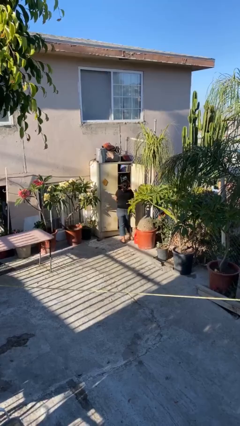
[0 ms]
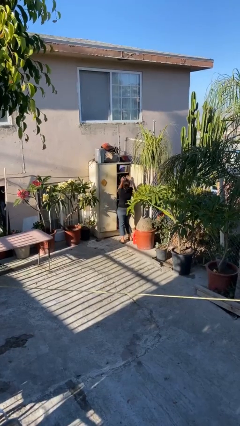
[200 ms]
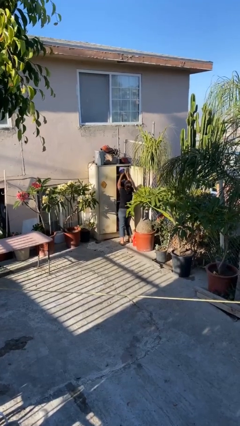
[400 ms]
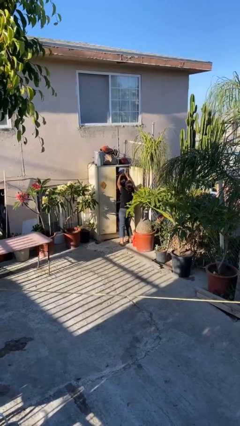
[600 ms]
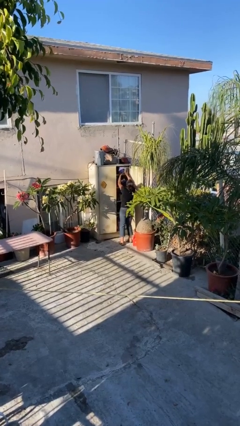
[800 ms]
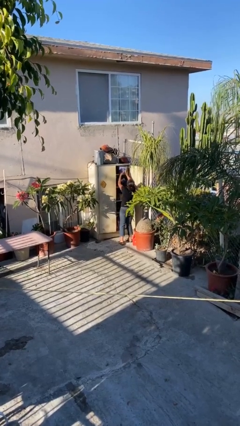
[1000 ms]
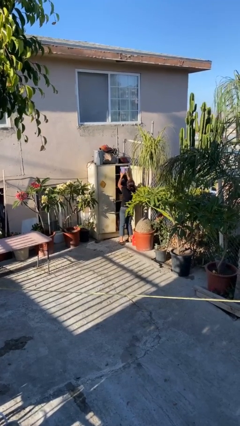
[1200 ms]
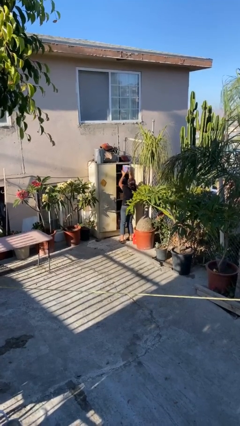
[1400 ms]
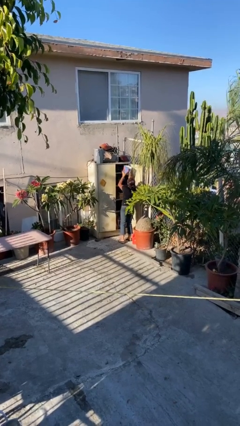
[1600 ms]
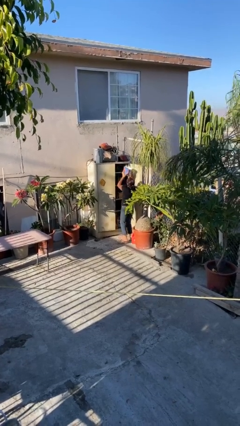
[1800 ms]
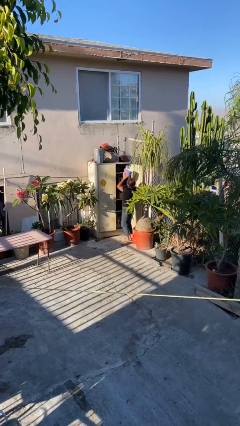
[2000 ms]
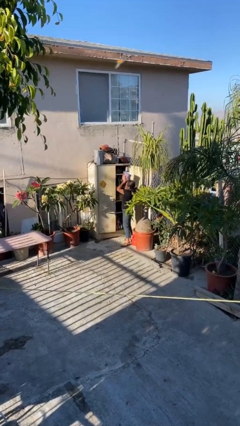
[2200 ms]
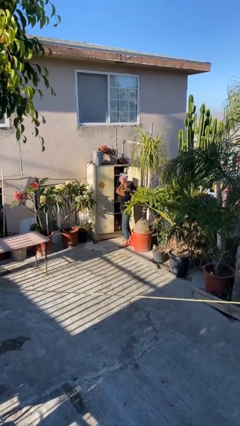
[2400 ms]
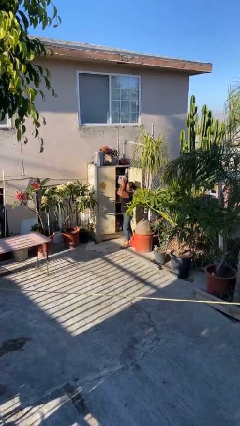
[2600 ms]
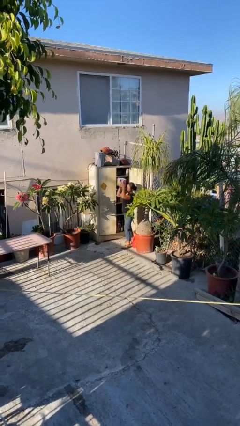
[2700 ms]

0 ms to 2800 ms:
person picks up object from shelf

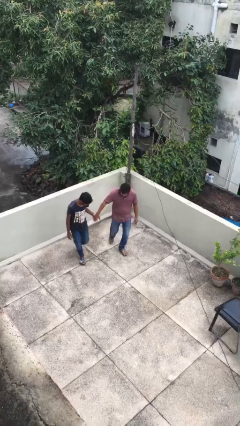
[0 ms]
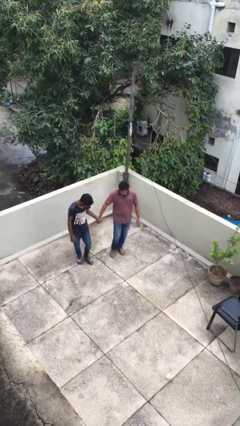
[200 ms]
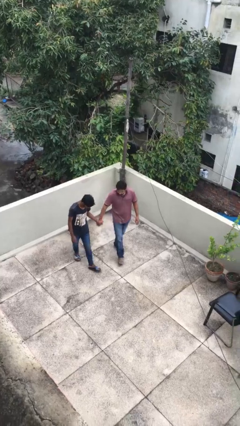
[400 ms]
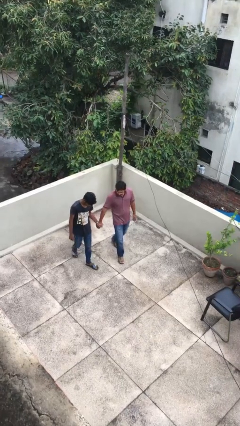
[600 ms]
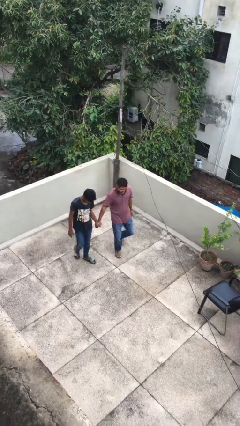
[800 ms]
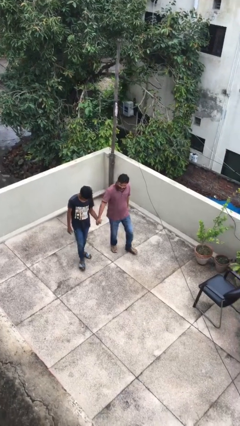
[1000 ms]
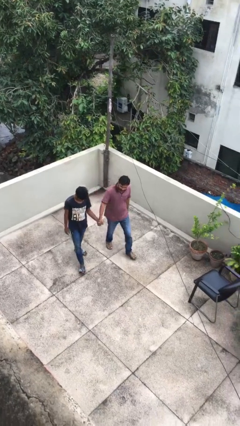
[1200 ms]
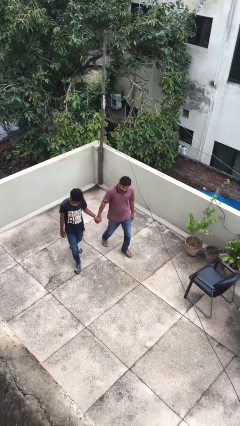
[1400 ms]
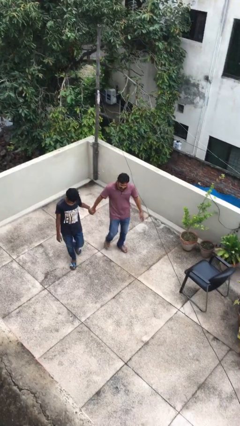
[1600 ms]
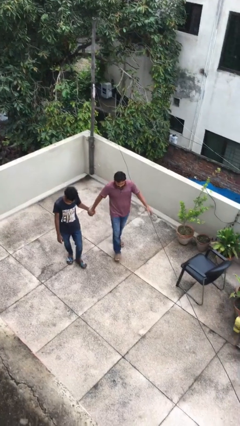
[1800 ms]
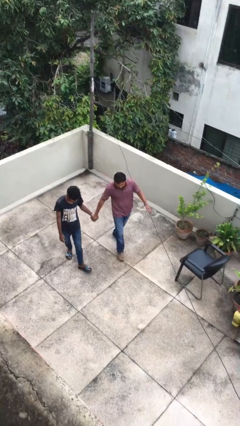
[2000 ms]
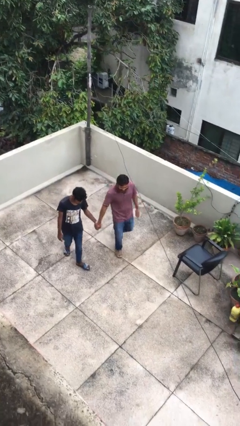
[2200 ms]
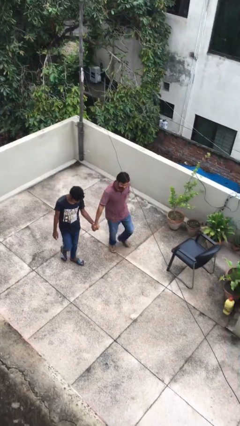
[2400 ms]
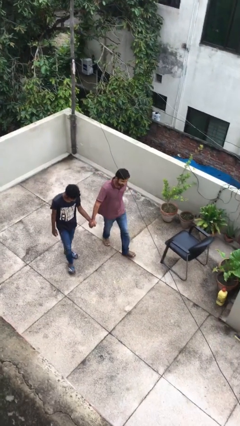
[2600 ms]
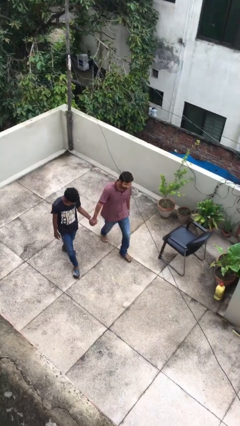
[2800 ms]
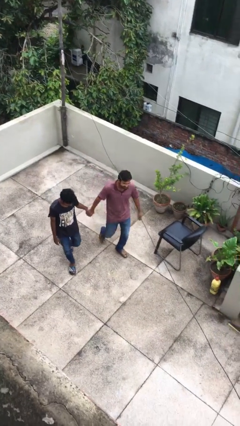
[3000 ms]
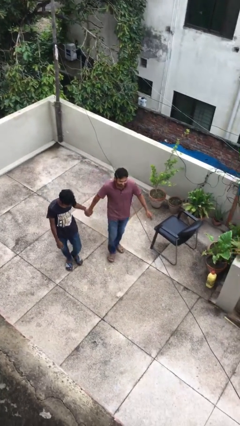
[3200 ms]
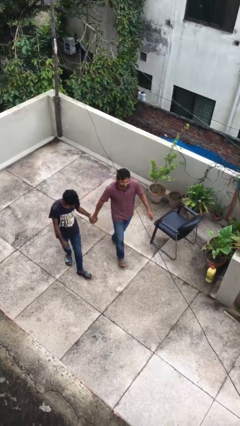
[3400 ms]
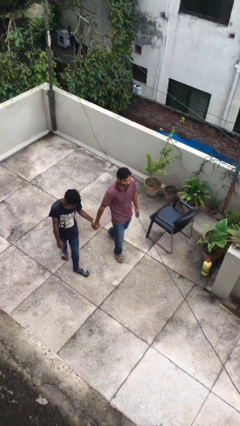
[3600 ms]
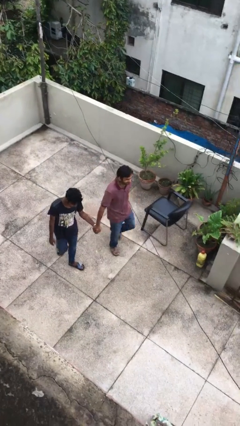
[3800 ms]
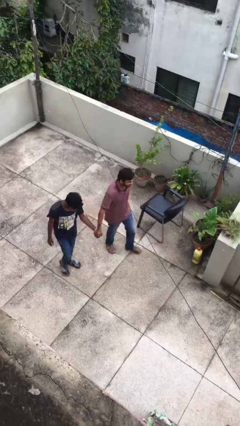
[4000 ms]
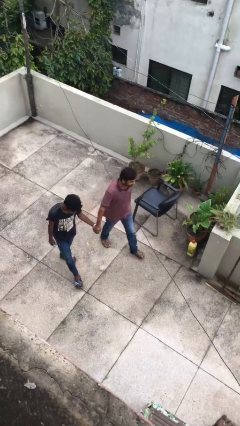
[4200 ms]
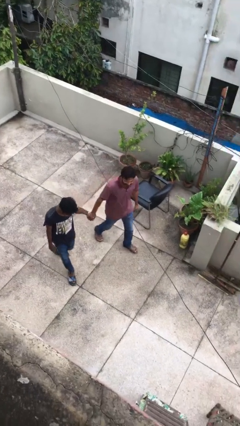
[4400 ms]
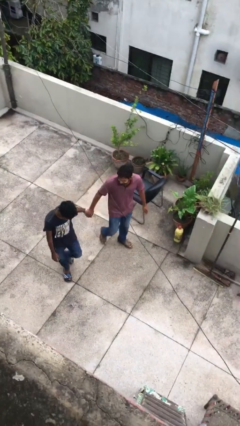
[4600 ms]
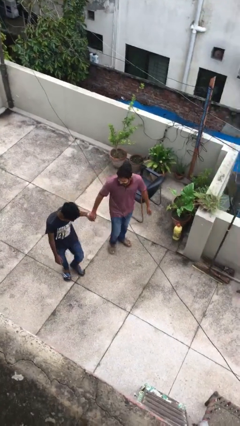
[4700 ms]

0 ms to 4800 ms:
person holds hand

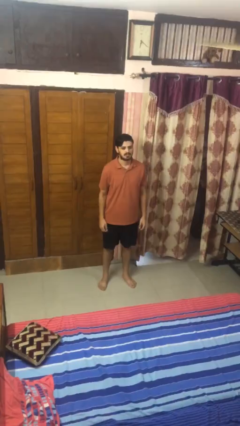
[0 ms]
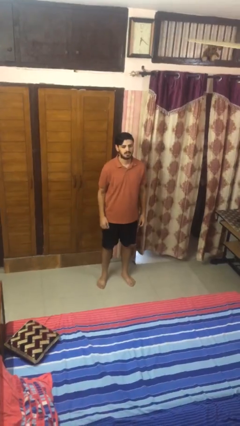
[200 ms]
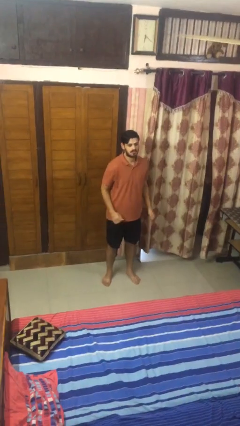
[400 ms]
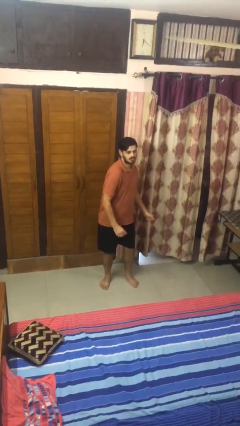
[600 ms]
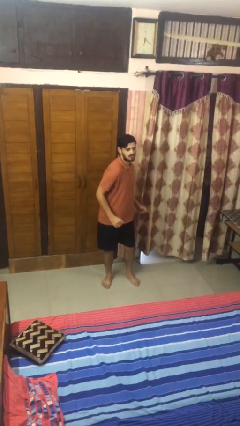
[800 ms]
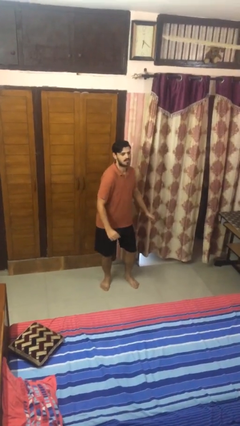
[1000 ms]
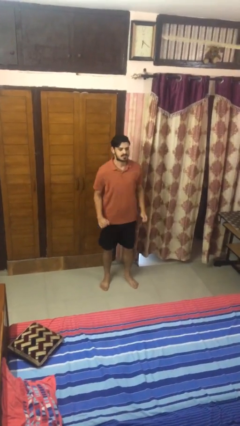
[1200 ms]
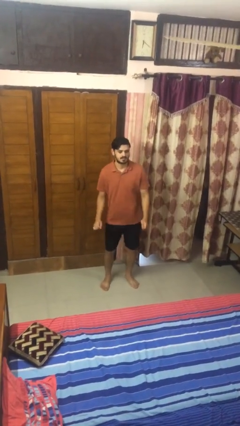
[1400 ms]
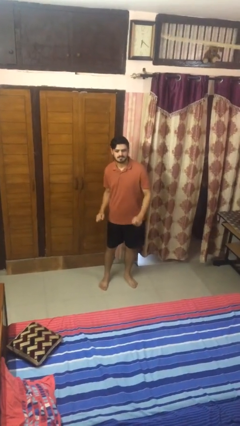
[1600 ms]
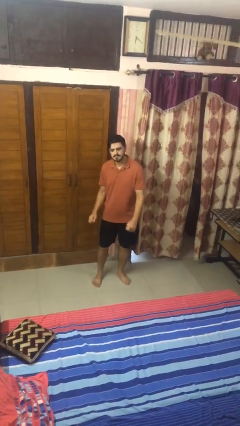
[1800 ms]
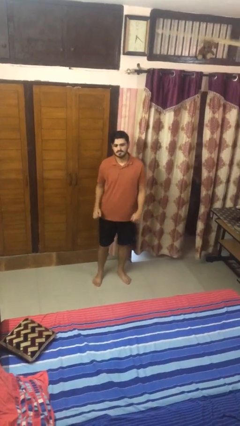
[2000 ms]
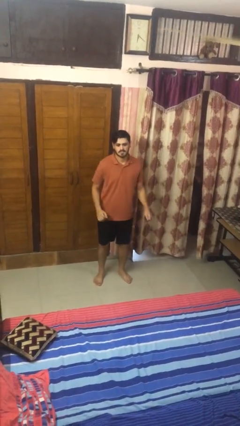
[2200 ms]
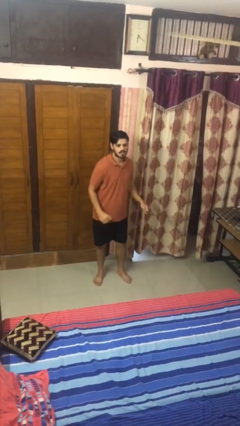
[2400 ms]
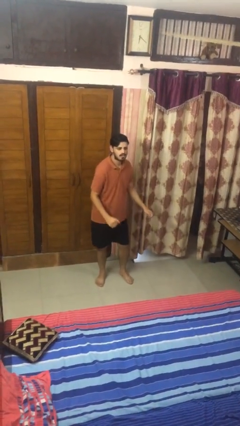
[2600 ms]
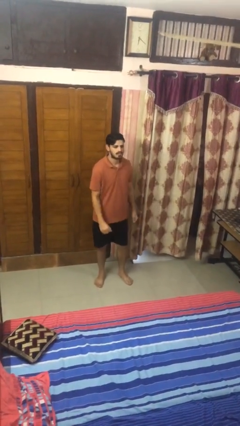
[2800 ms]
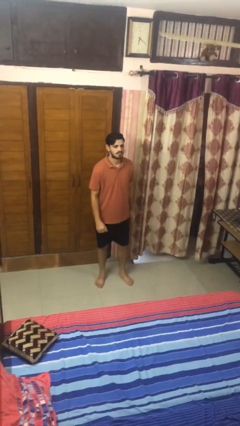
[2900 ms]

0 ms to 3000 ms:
person dances in place

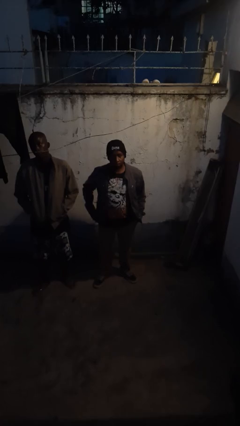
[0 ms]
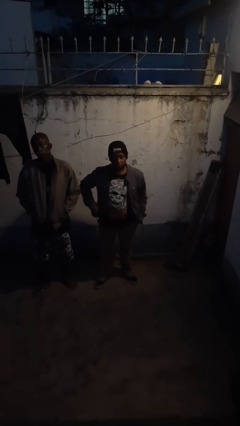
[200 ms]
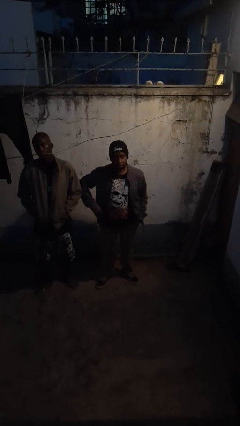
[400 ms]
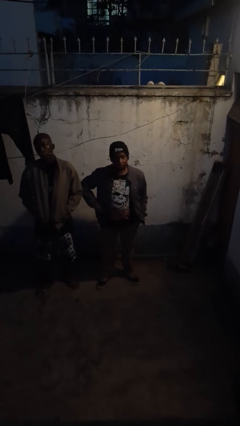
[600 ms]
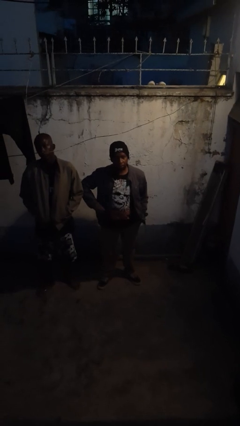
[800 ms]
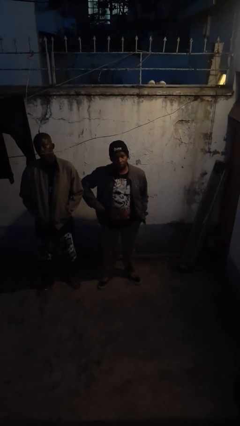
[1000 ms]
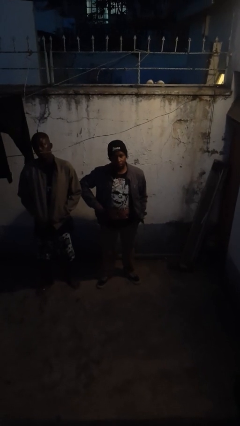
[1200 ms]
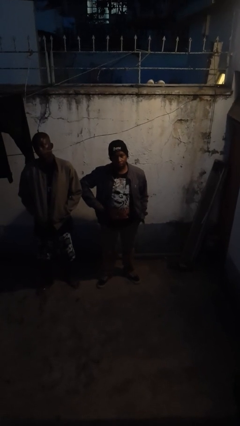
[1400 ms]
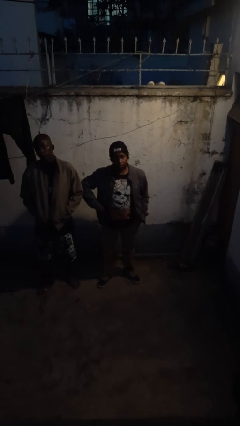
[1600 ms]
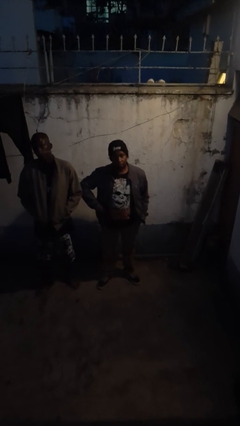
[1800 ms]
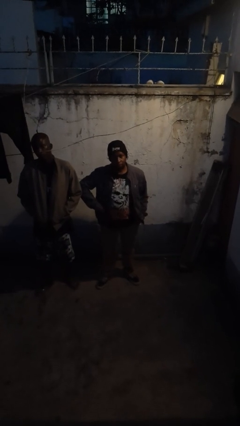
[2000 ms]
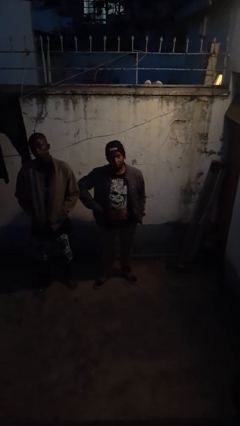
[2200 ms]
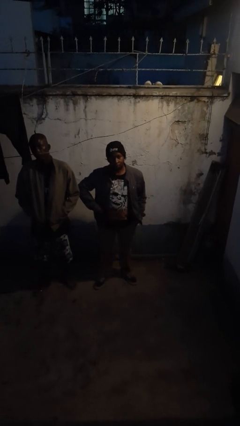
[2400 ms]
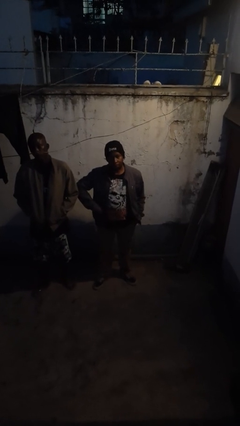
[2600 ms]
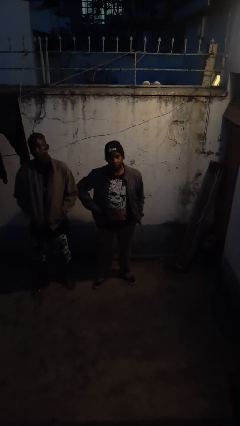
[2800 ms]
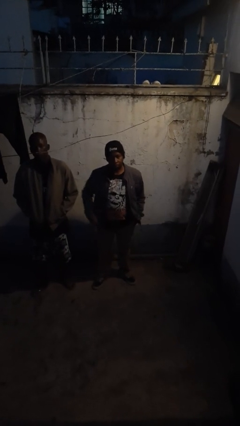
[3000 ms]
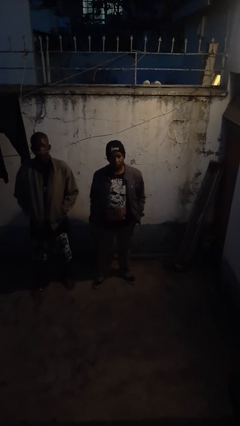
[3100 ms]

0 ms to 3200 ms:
person nudges person with elbow

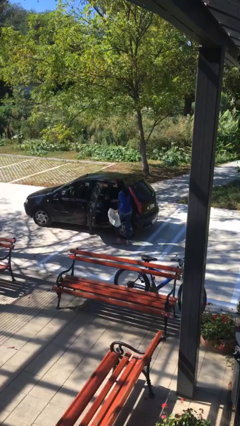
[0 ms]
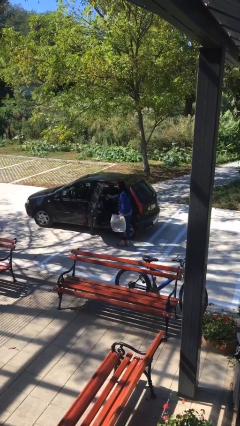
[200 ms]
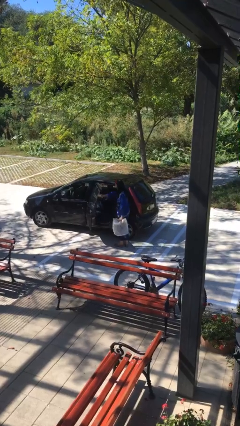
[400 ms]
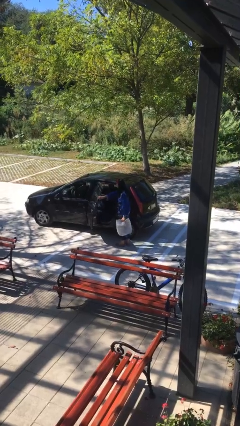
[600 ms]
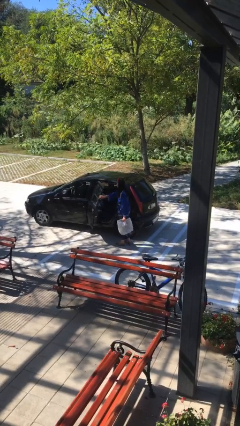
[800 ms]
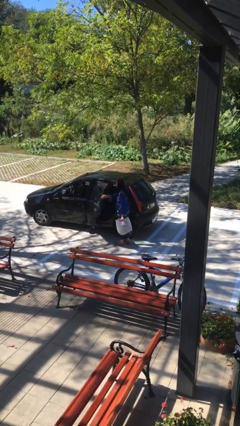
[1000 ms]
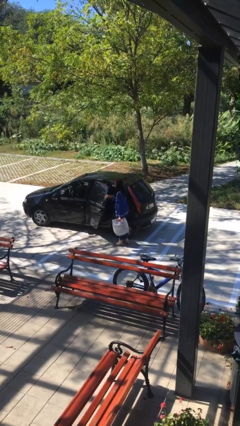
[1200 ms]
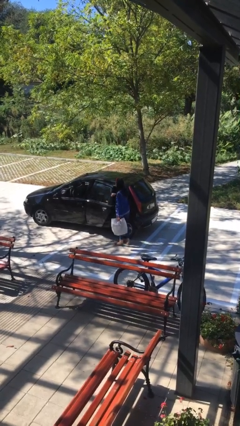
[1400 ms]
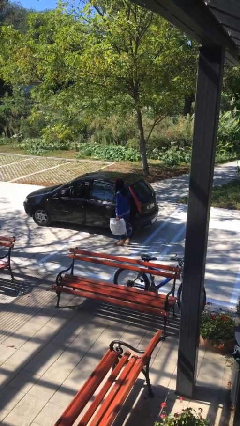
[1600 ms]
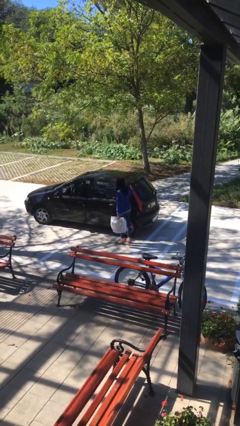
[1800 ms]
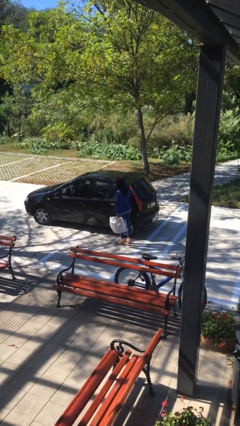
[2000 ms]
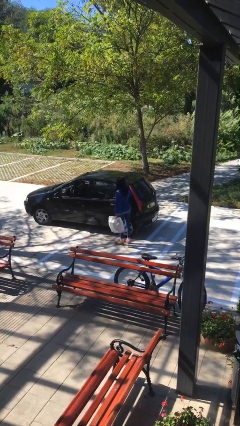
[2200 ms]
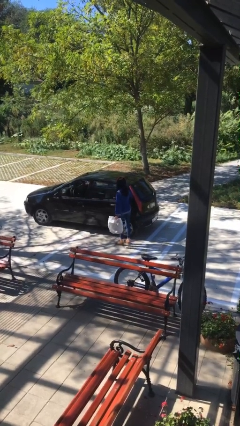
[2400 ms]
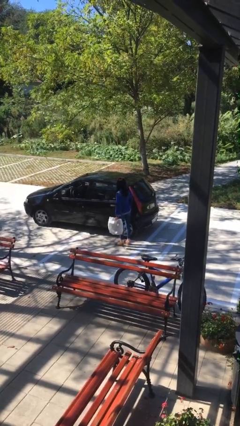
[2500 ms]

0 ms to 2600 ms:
person closes car door

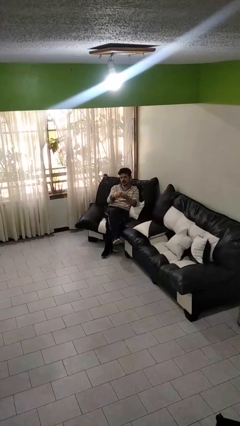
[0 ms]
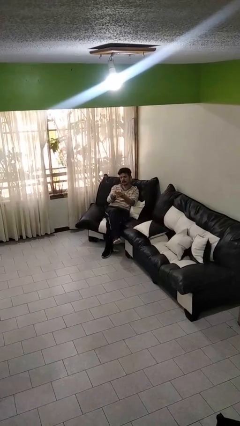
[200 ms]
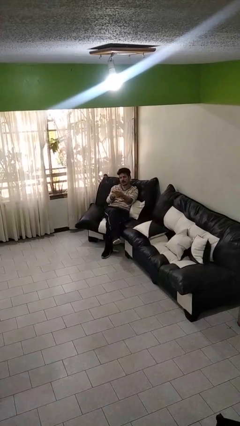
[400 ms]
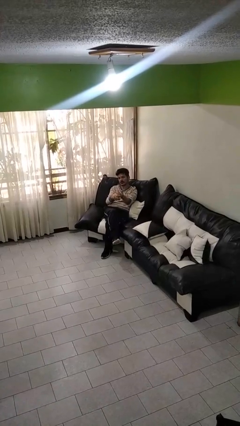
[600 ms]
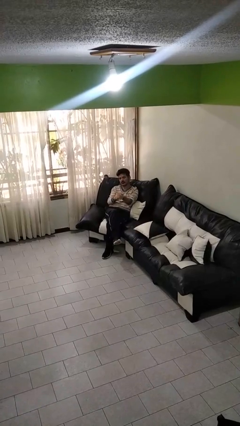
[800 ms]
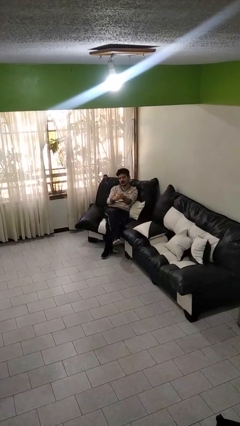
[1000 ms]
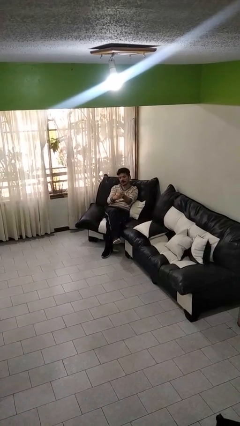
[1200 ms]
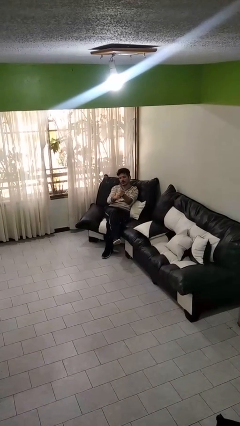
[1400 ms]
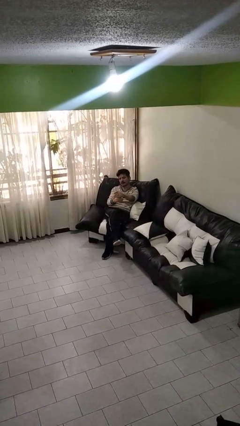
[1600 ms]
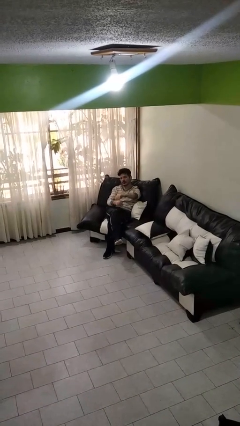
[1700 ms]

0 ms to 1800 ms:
person puts on wristwatch
